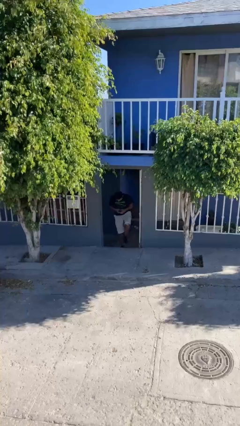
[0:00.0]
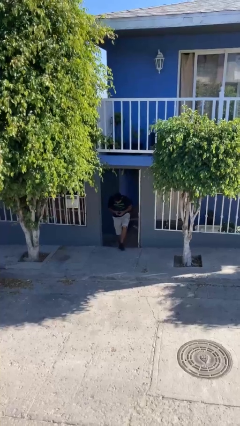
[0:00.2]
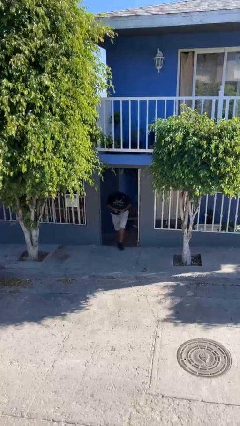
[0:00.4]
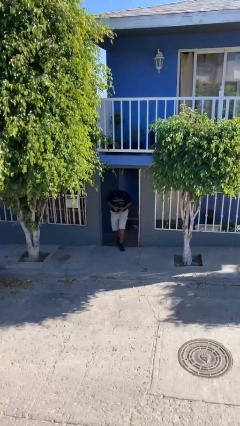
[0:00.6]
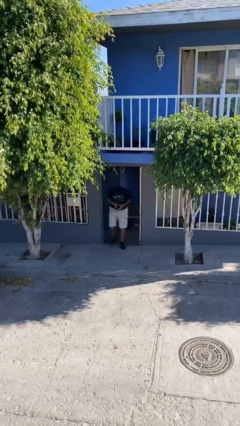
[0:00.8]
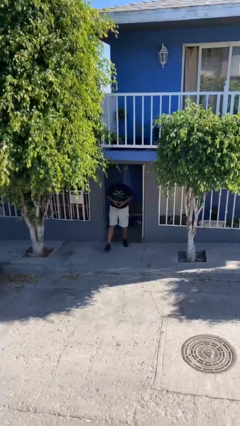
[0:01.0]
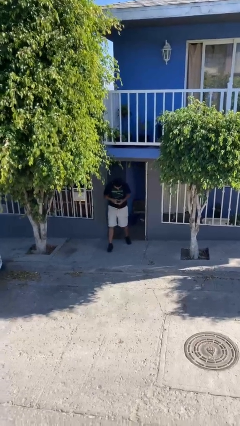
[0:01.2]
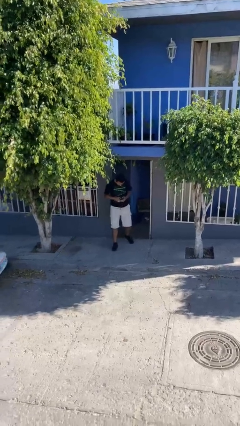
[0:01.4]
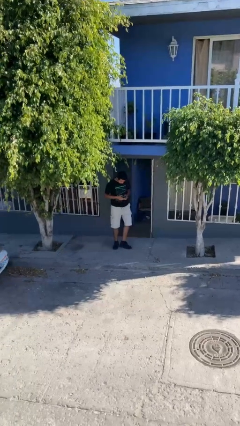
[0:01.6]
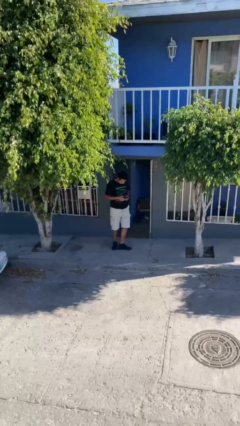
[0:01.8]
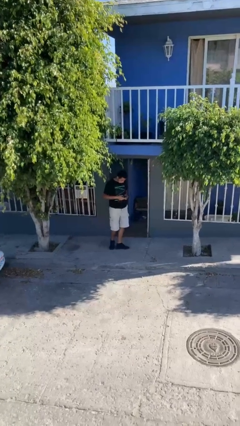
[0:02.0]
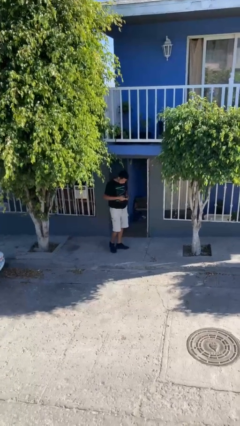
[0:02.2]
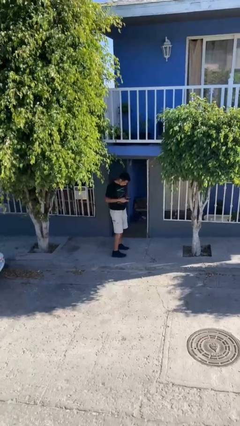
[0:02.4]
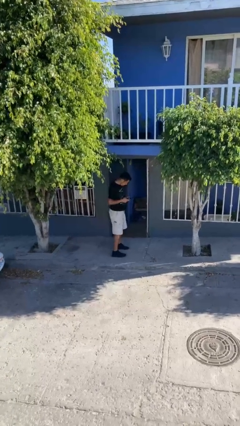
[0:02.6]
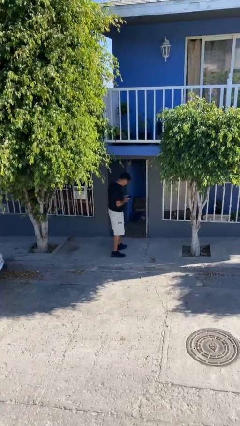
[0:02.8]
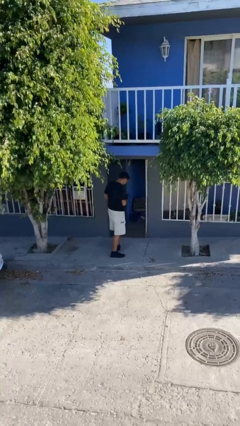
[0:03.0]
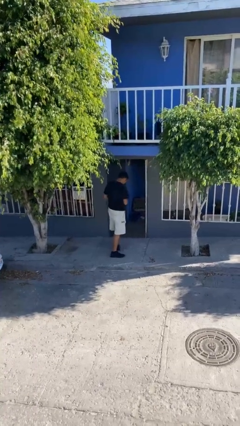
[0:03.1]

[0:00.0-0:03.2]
person enters scene through structure

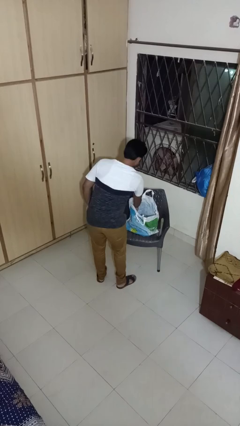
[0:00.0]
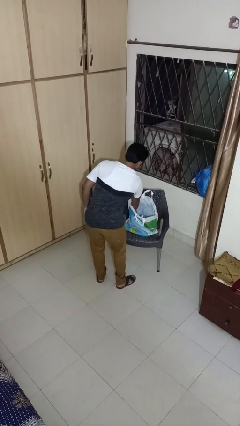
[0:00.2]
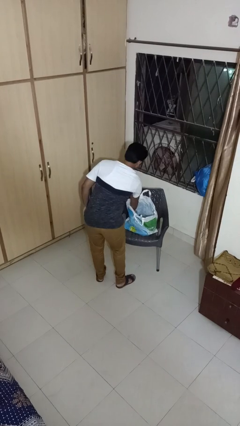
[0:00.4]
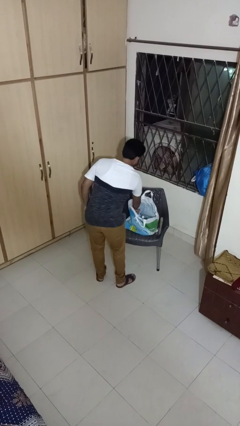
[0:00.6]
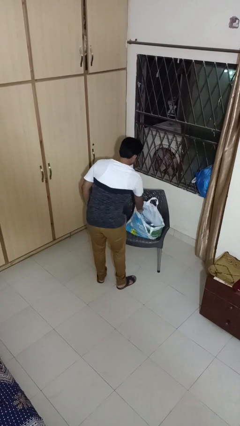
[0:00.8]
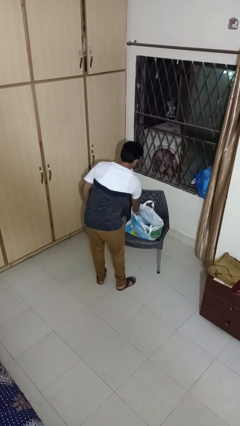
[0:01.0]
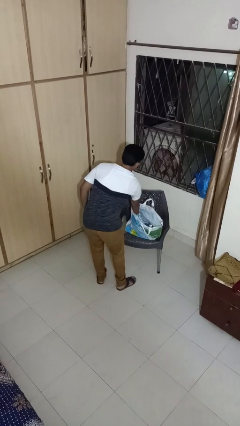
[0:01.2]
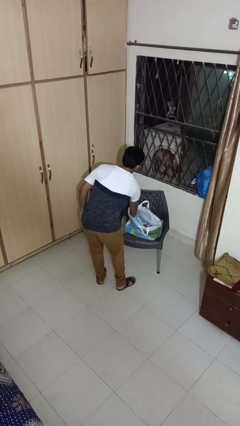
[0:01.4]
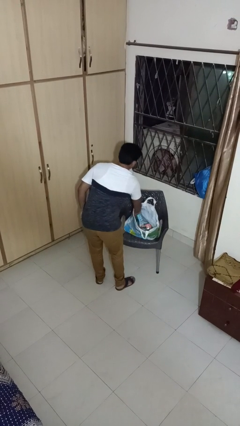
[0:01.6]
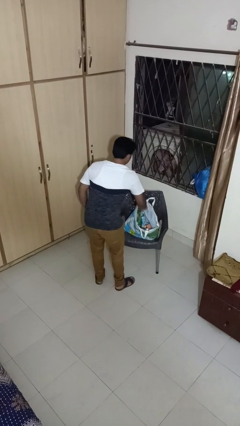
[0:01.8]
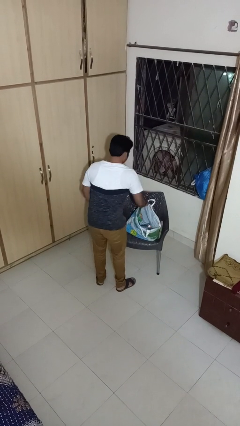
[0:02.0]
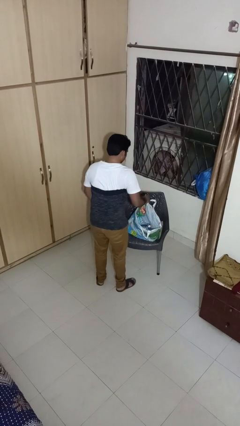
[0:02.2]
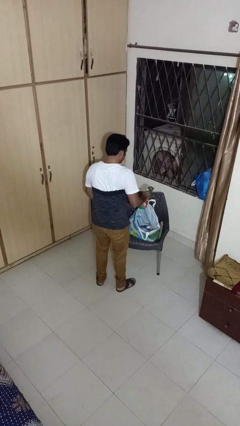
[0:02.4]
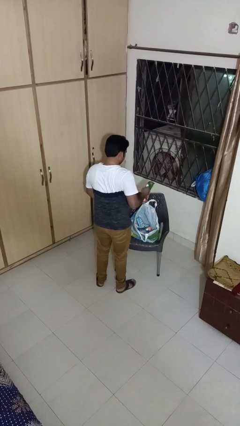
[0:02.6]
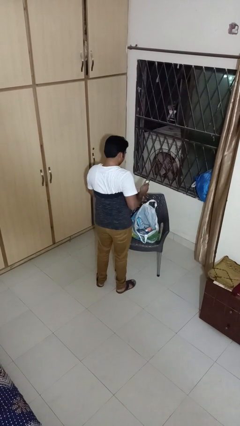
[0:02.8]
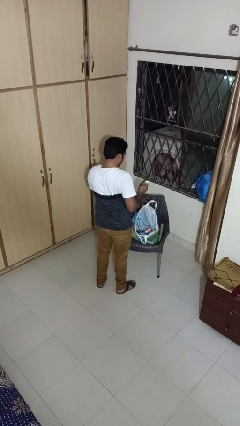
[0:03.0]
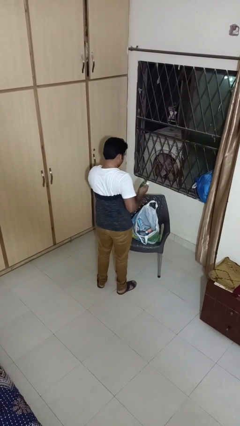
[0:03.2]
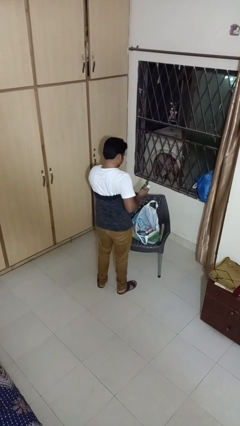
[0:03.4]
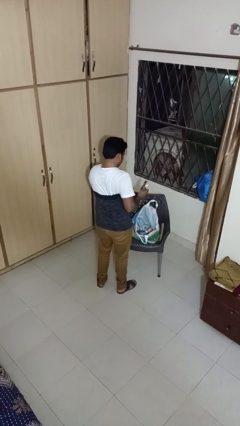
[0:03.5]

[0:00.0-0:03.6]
person takes object from bag

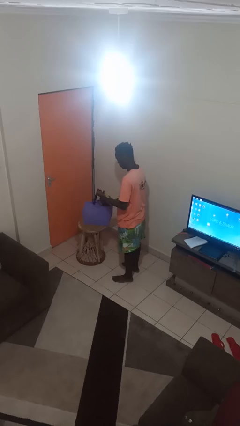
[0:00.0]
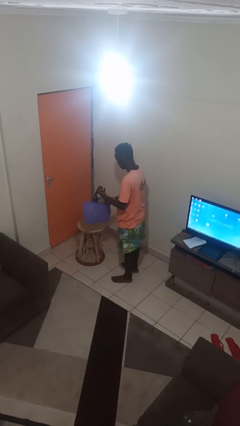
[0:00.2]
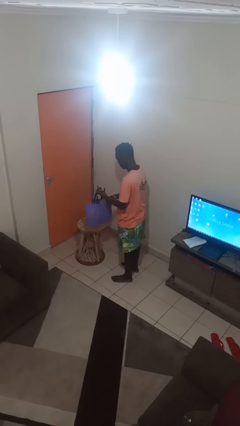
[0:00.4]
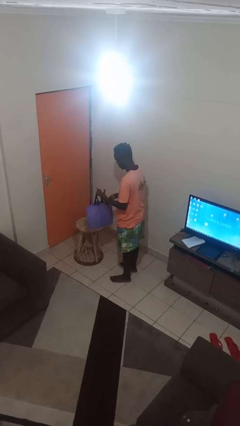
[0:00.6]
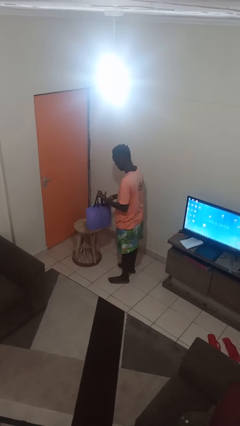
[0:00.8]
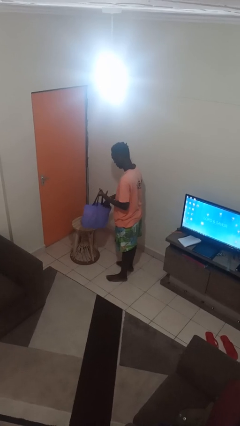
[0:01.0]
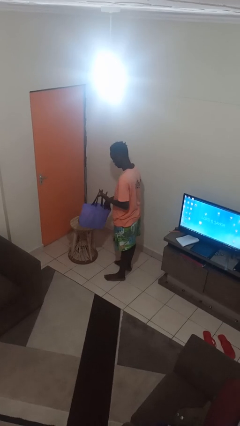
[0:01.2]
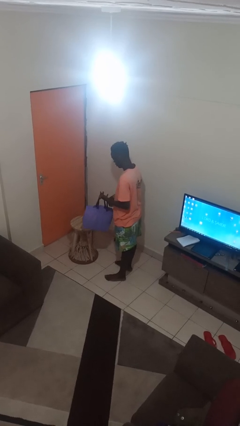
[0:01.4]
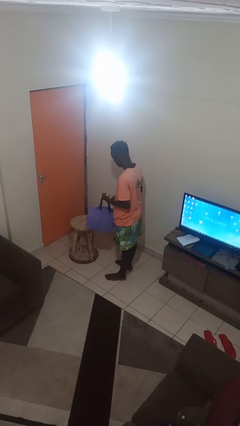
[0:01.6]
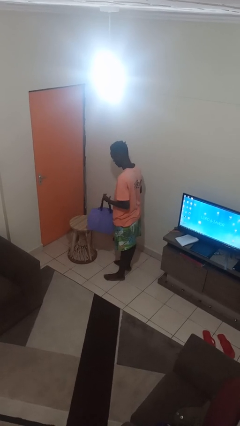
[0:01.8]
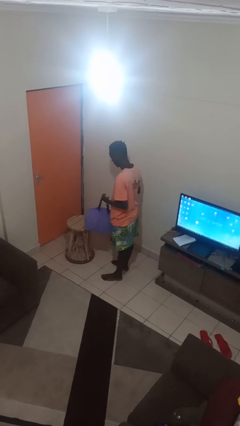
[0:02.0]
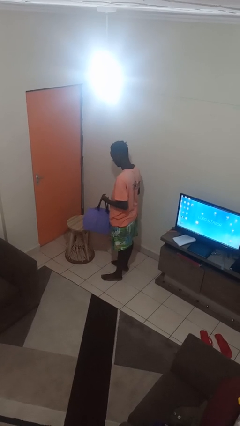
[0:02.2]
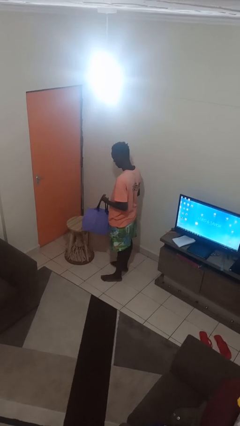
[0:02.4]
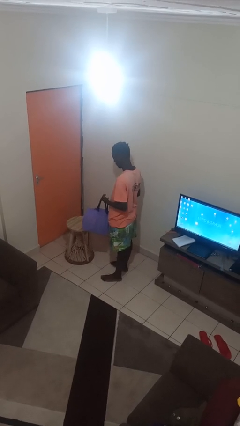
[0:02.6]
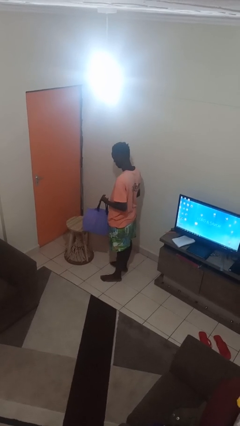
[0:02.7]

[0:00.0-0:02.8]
person puts object into bag

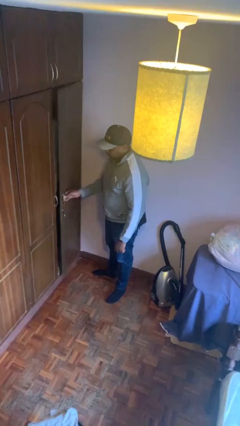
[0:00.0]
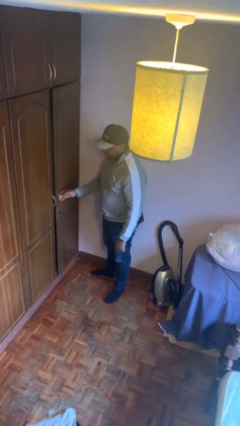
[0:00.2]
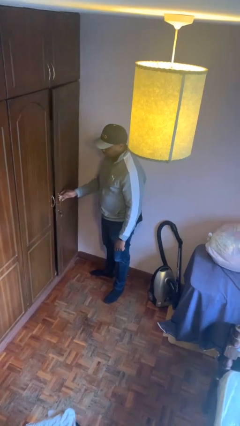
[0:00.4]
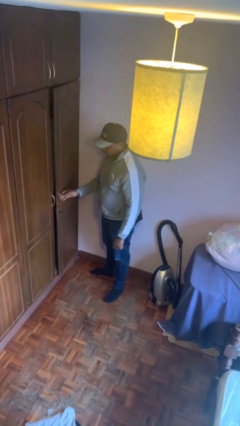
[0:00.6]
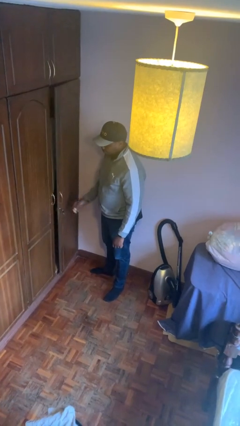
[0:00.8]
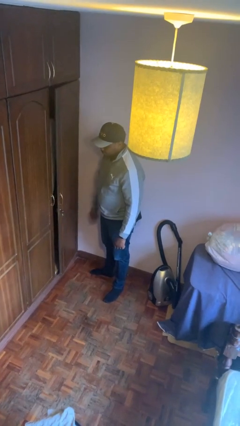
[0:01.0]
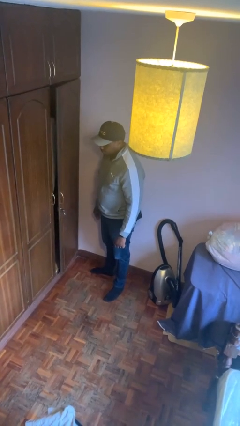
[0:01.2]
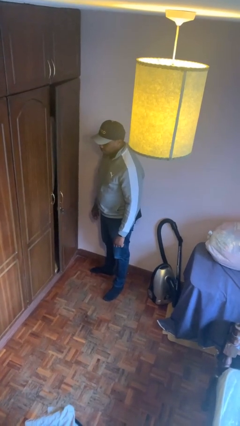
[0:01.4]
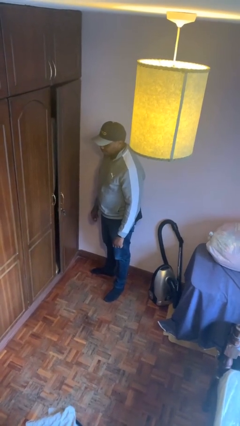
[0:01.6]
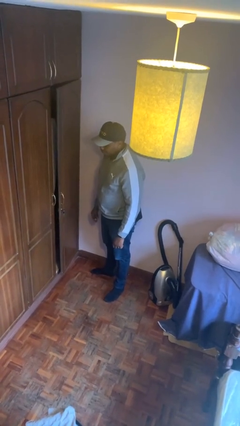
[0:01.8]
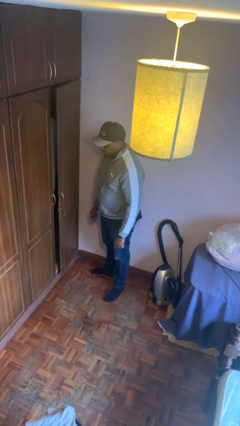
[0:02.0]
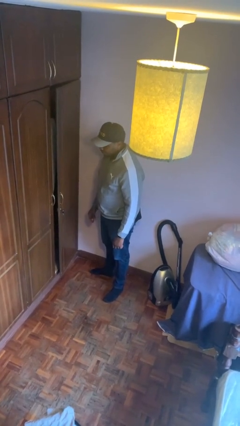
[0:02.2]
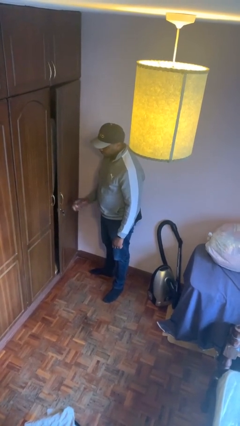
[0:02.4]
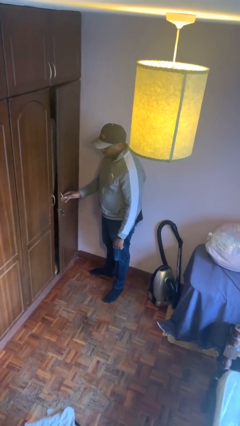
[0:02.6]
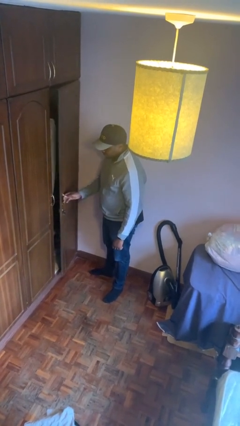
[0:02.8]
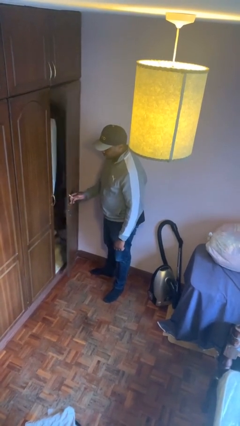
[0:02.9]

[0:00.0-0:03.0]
person closes closet door

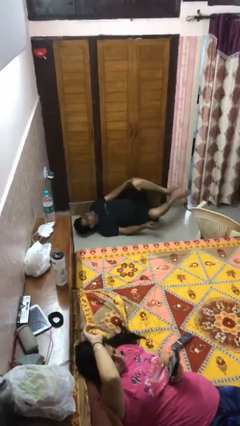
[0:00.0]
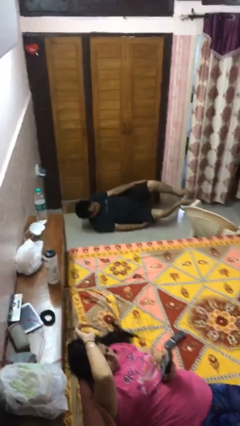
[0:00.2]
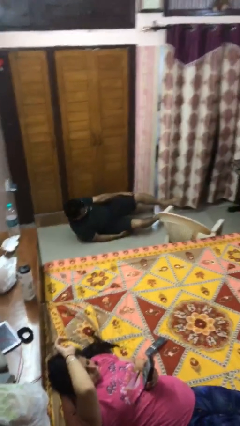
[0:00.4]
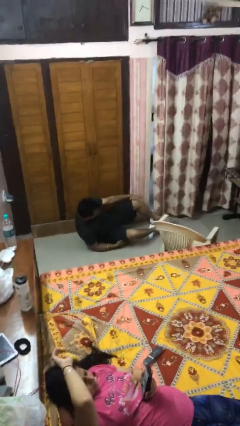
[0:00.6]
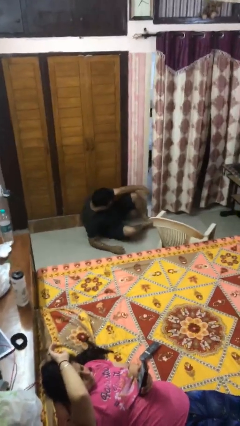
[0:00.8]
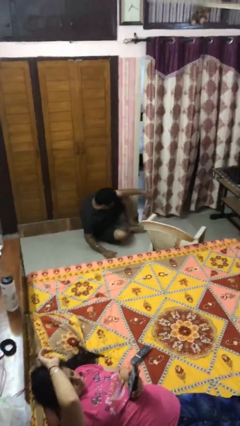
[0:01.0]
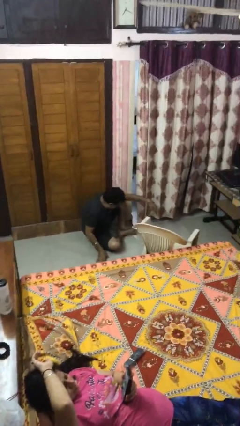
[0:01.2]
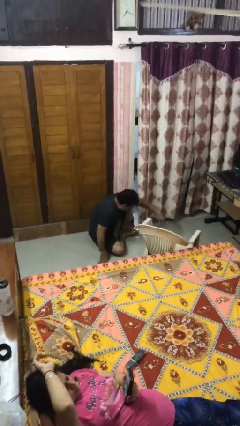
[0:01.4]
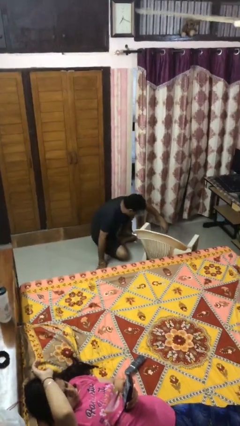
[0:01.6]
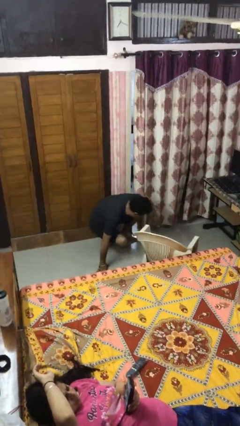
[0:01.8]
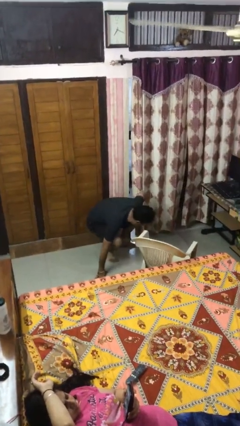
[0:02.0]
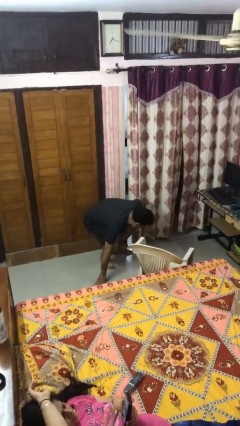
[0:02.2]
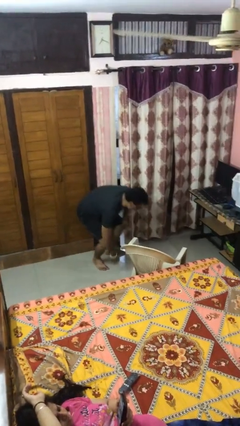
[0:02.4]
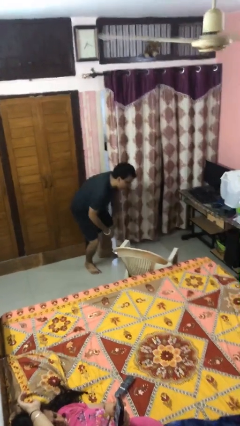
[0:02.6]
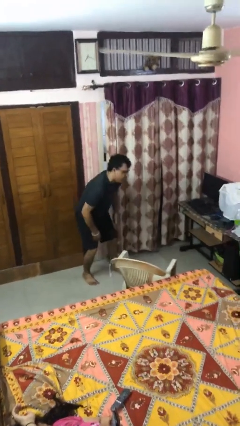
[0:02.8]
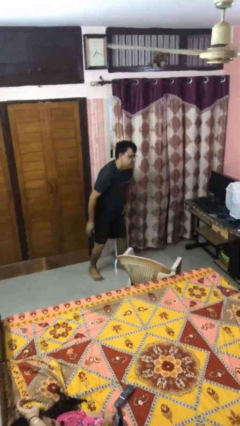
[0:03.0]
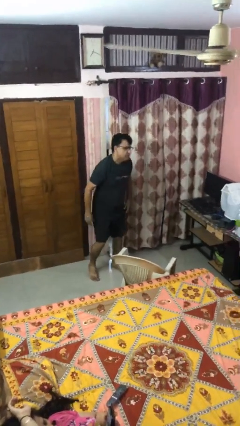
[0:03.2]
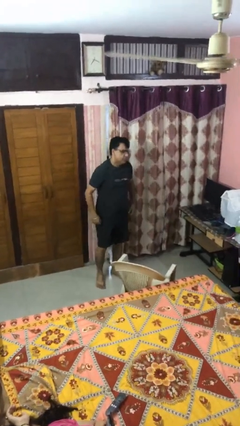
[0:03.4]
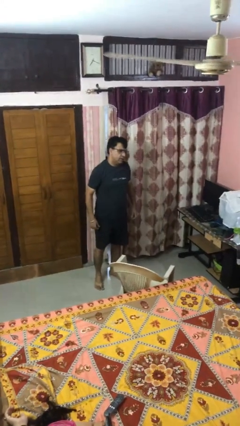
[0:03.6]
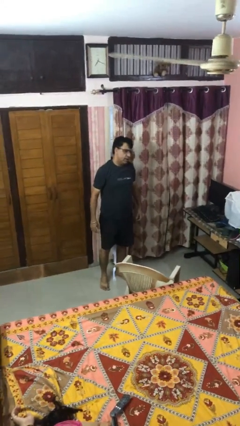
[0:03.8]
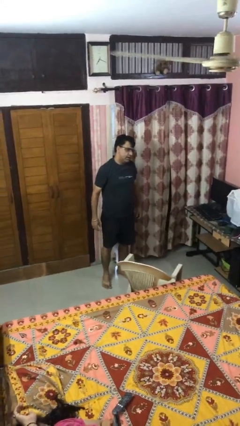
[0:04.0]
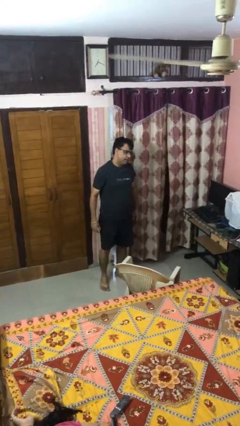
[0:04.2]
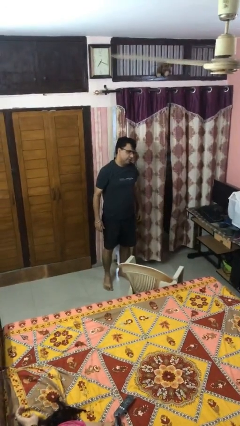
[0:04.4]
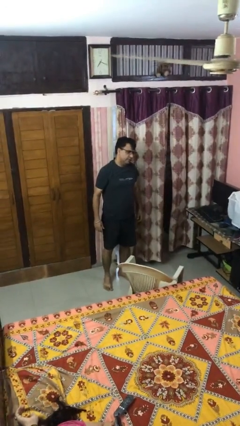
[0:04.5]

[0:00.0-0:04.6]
person stands up from floor

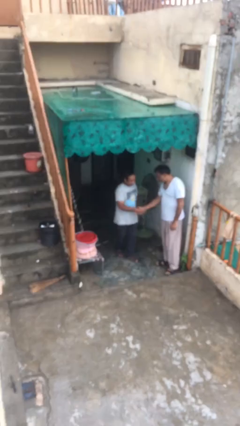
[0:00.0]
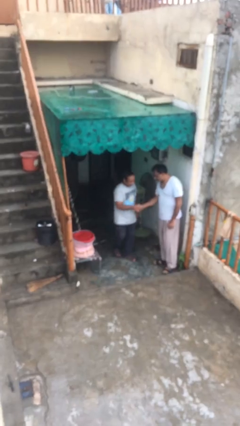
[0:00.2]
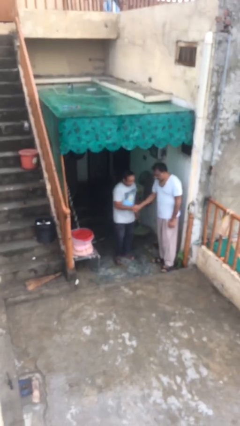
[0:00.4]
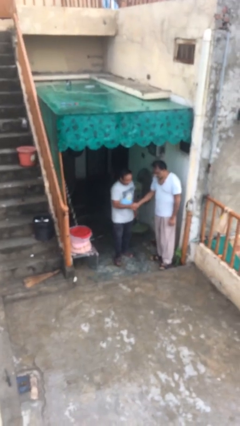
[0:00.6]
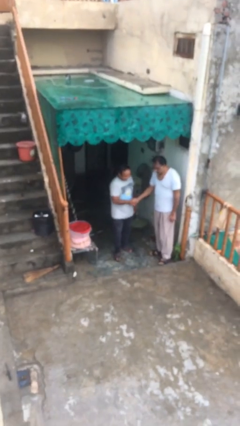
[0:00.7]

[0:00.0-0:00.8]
person shakes hand
